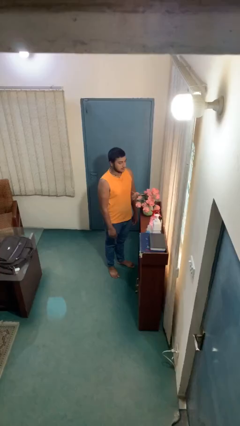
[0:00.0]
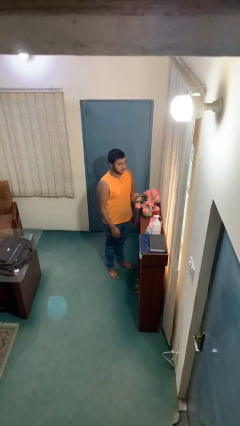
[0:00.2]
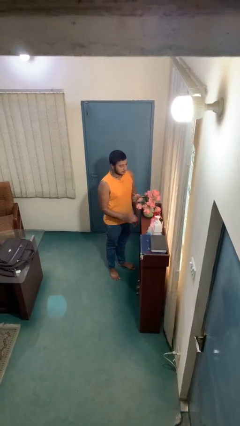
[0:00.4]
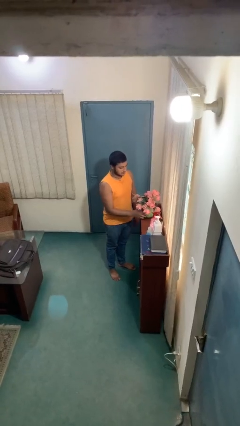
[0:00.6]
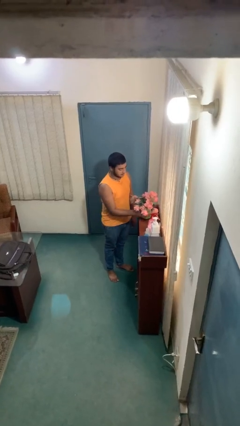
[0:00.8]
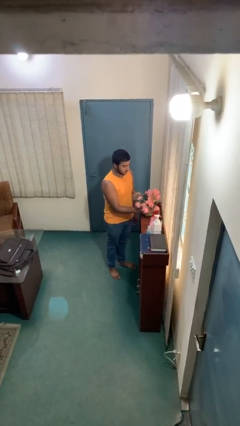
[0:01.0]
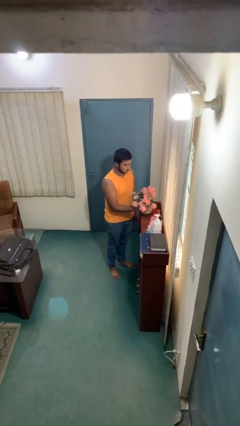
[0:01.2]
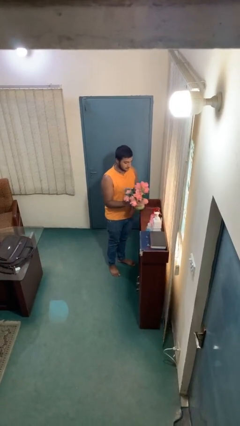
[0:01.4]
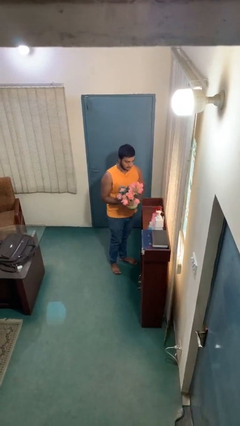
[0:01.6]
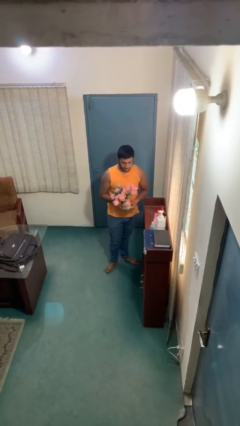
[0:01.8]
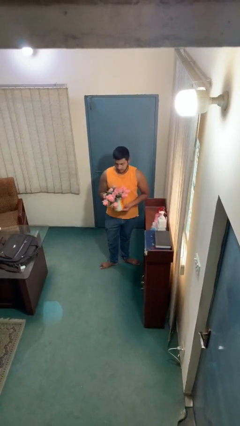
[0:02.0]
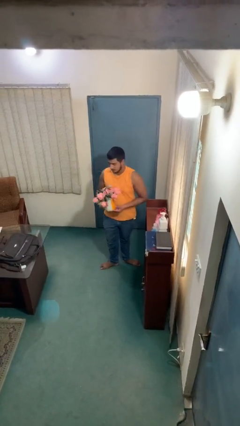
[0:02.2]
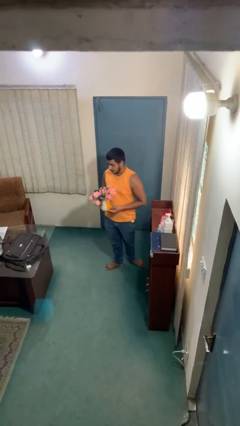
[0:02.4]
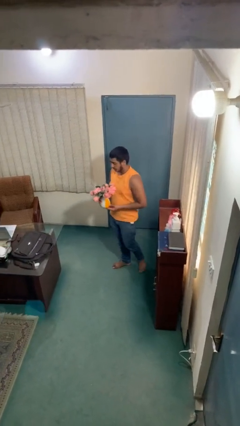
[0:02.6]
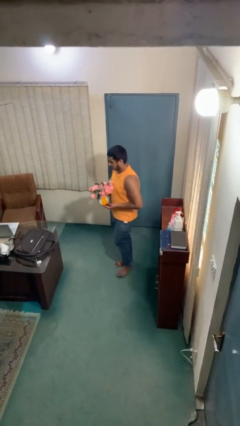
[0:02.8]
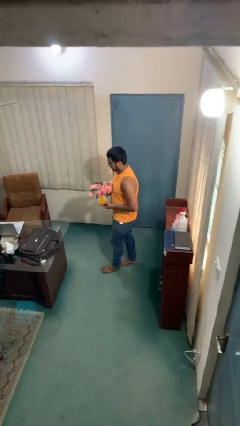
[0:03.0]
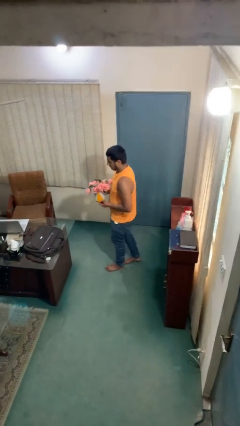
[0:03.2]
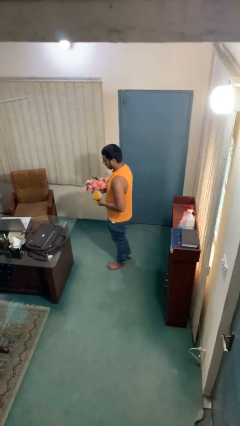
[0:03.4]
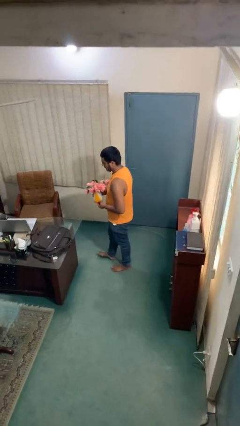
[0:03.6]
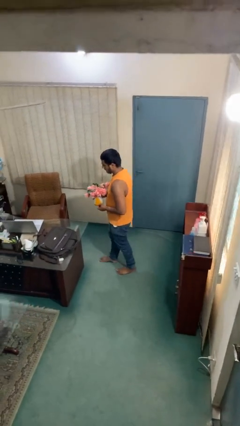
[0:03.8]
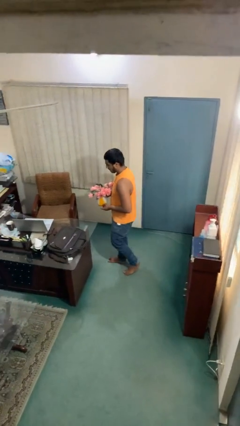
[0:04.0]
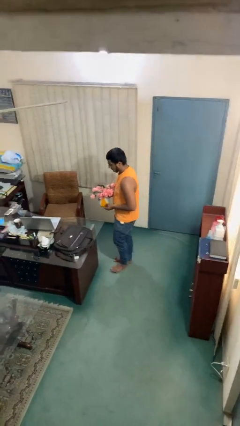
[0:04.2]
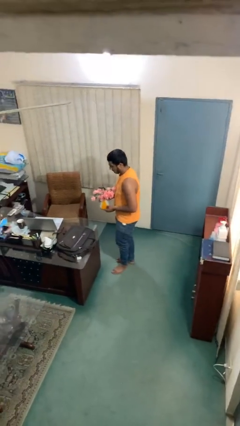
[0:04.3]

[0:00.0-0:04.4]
person picks up object from shelf

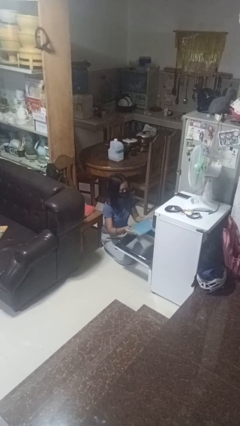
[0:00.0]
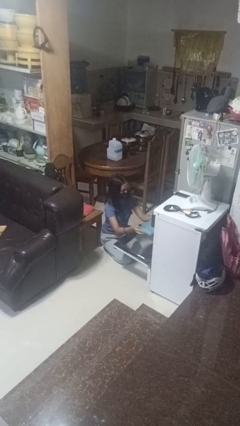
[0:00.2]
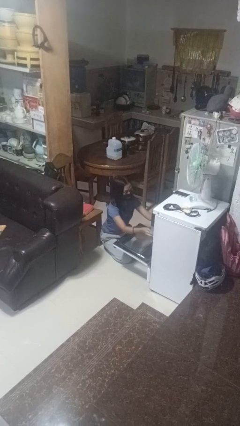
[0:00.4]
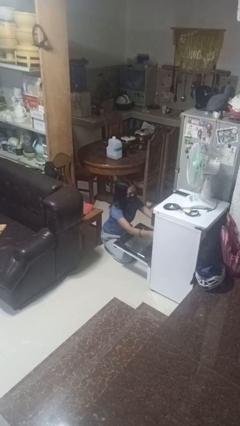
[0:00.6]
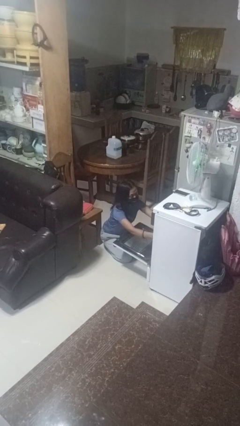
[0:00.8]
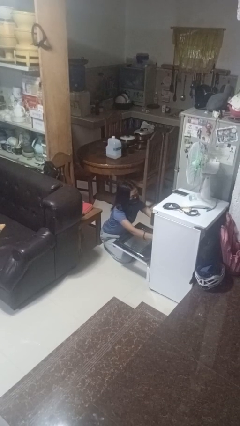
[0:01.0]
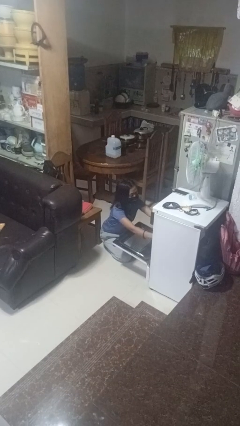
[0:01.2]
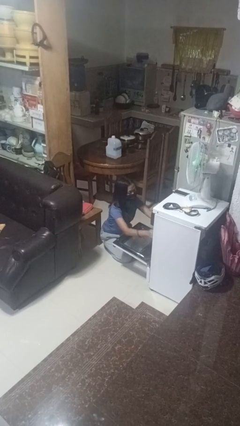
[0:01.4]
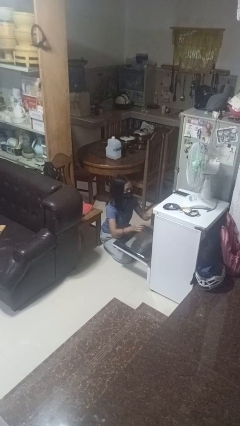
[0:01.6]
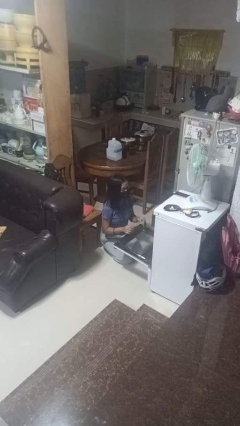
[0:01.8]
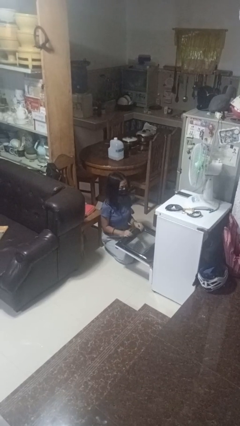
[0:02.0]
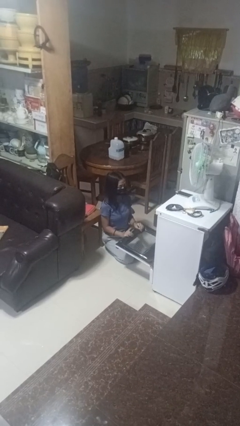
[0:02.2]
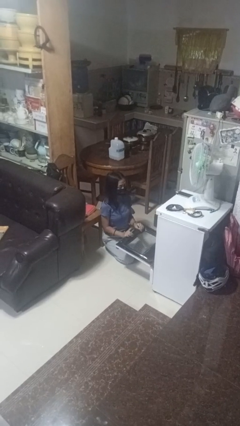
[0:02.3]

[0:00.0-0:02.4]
person puts object into oven

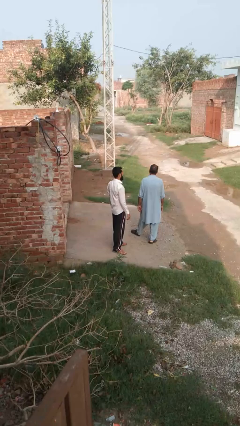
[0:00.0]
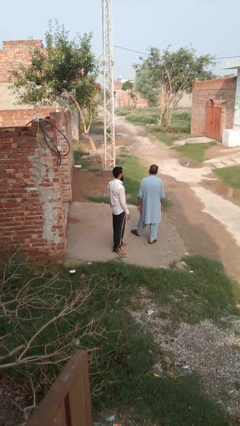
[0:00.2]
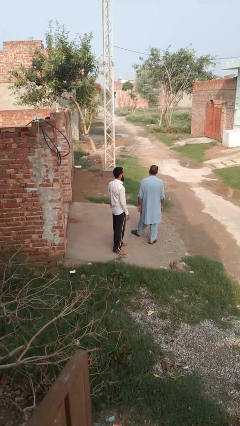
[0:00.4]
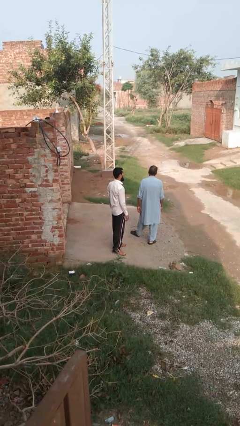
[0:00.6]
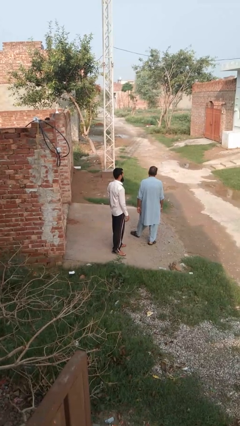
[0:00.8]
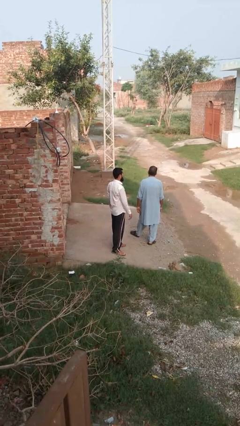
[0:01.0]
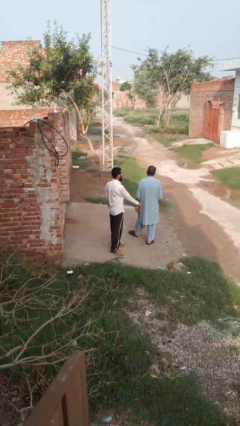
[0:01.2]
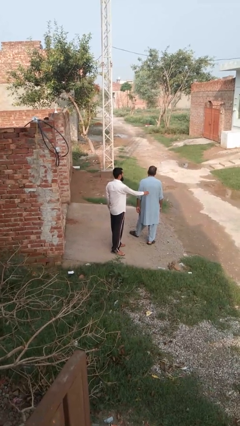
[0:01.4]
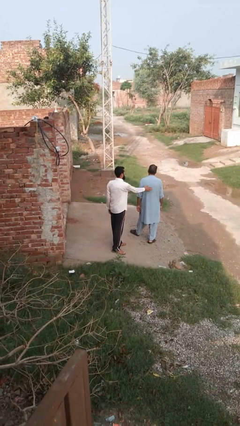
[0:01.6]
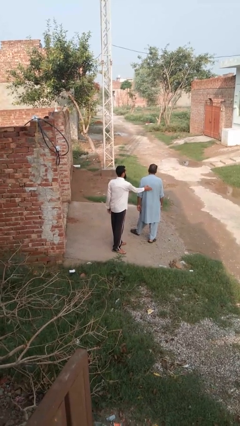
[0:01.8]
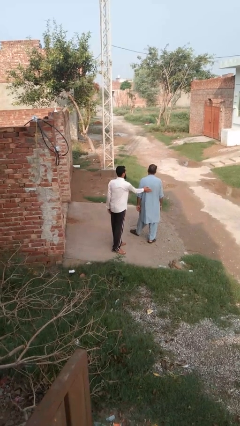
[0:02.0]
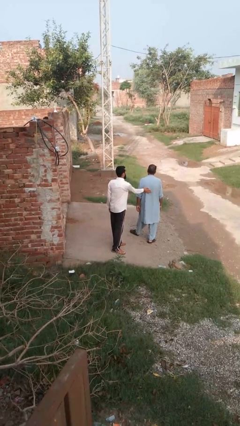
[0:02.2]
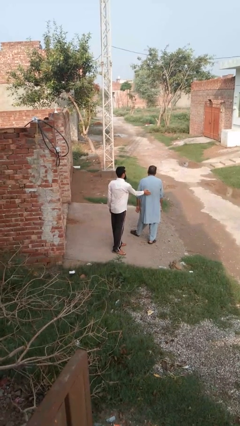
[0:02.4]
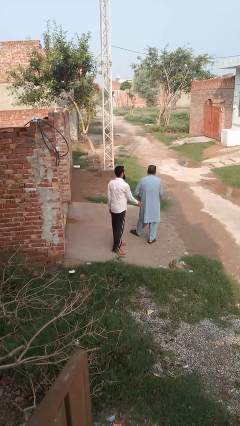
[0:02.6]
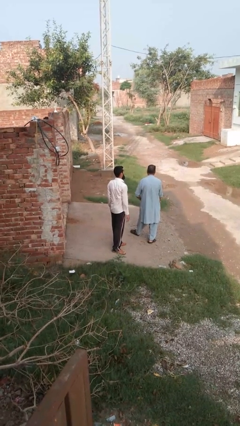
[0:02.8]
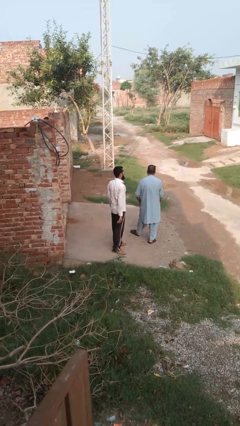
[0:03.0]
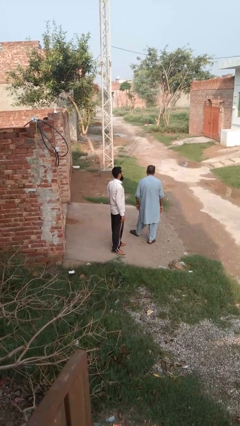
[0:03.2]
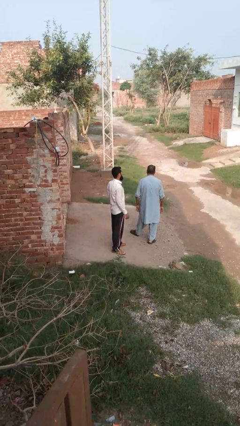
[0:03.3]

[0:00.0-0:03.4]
person touches back of person

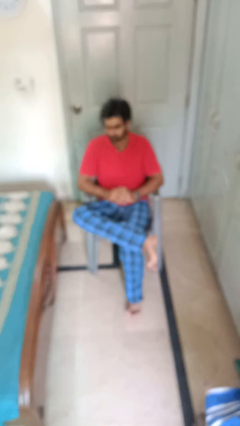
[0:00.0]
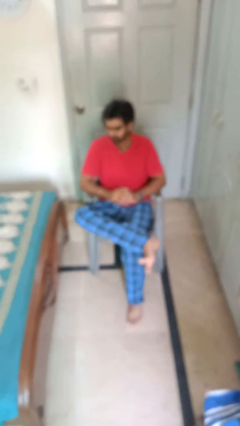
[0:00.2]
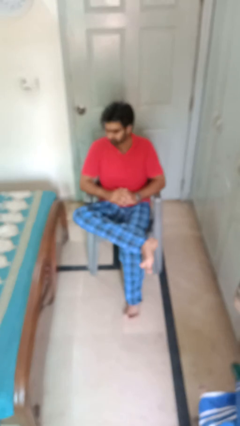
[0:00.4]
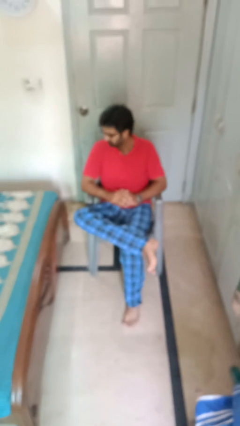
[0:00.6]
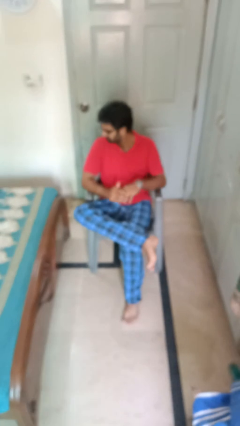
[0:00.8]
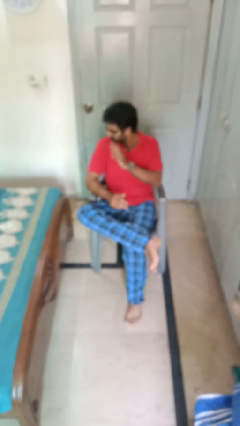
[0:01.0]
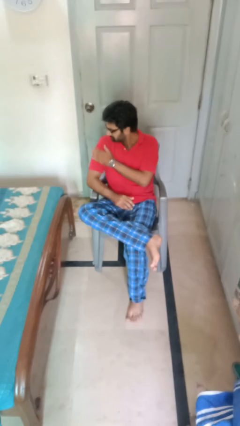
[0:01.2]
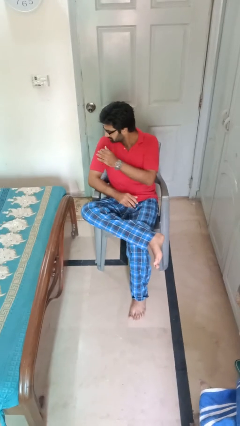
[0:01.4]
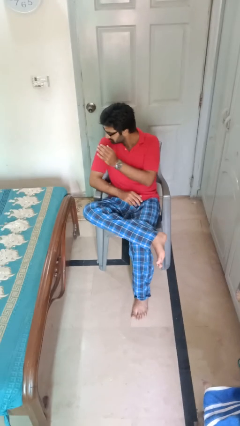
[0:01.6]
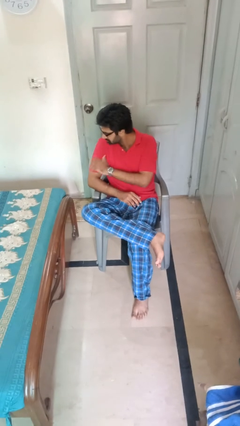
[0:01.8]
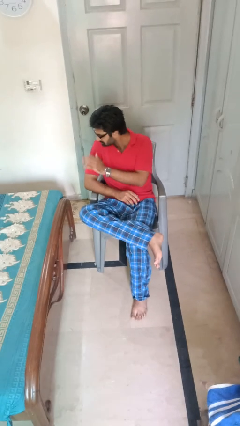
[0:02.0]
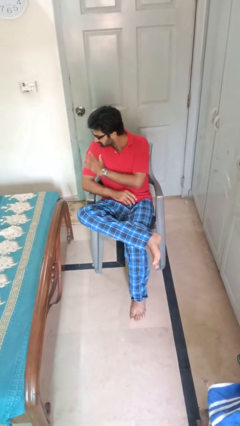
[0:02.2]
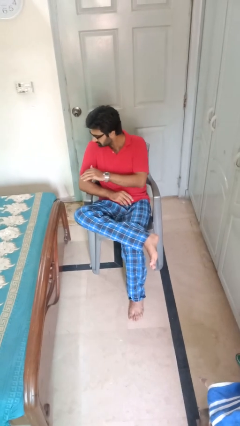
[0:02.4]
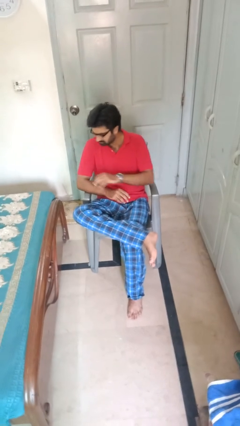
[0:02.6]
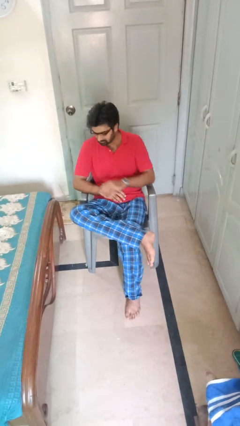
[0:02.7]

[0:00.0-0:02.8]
person swats bug

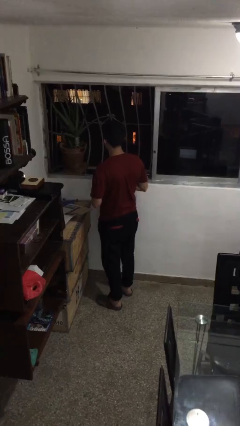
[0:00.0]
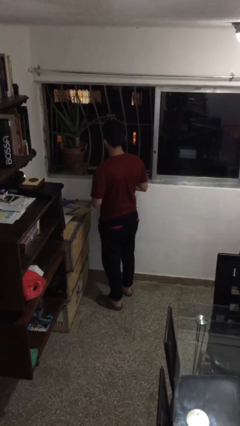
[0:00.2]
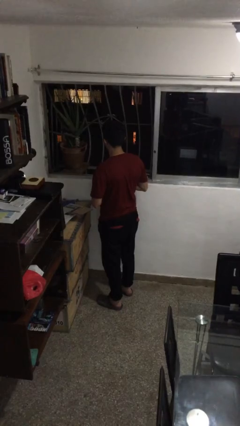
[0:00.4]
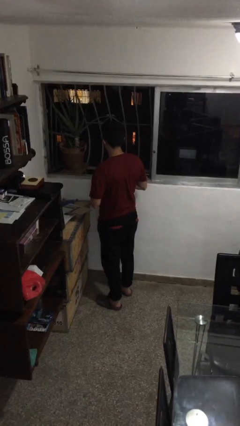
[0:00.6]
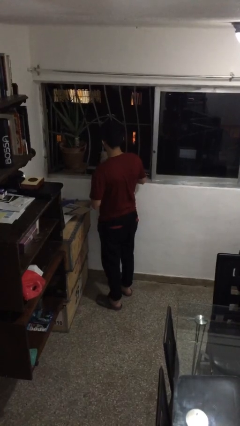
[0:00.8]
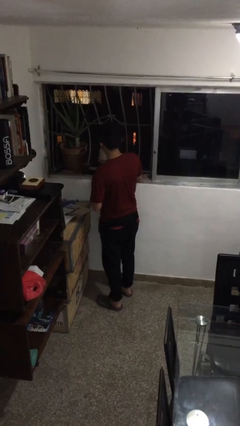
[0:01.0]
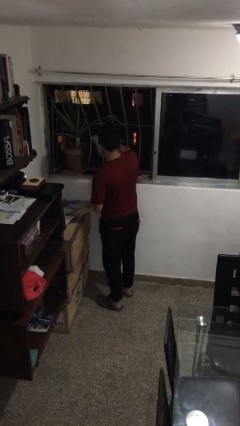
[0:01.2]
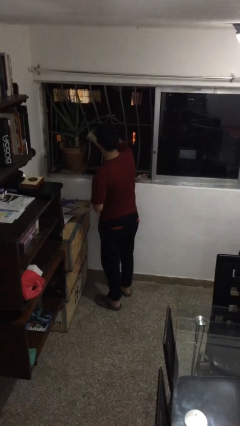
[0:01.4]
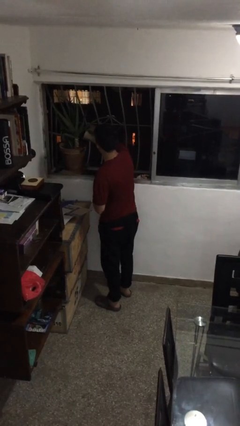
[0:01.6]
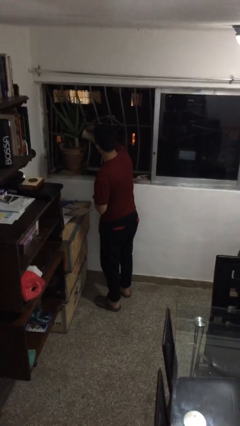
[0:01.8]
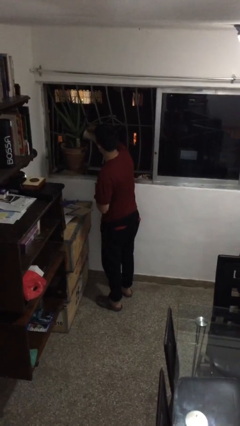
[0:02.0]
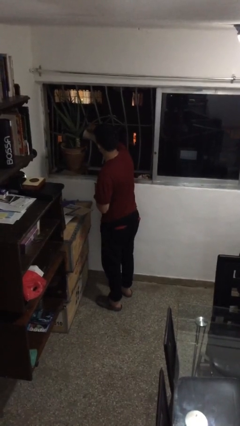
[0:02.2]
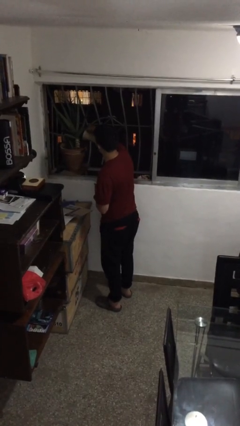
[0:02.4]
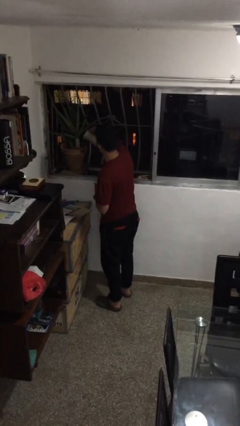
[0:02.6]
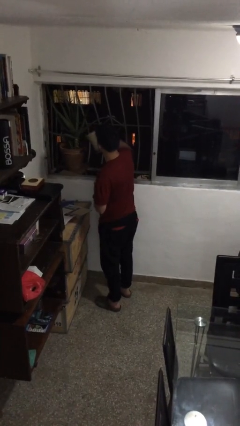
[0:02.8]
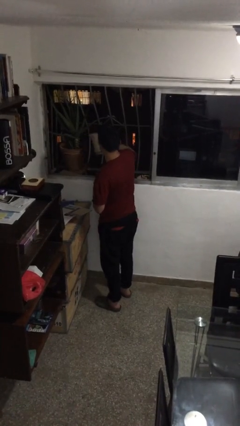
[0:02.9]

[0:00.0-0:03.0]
person waters houseplant

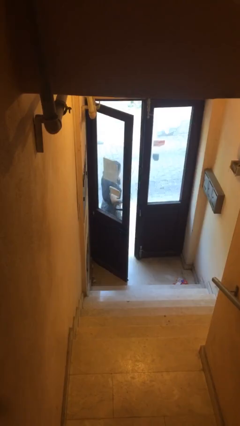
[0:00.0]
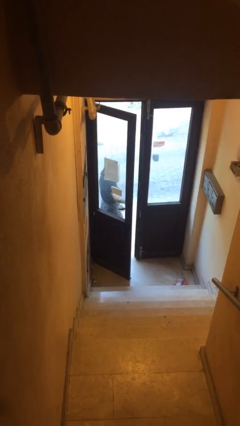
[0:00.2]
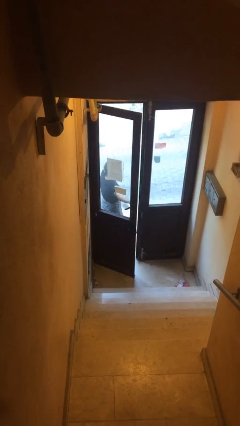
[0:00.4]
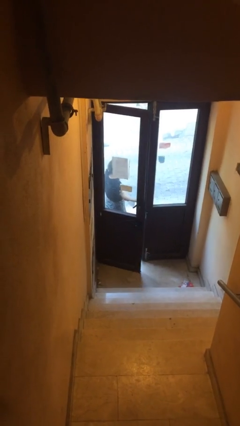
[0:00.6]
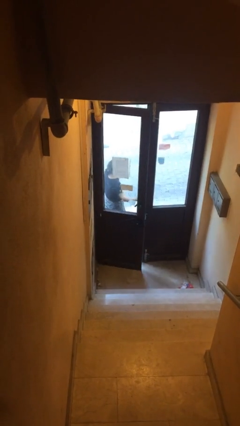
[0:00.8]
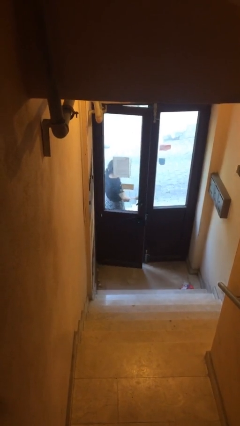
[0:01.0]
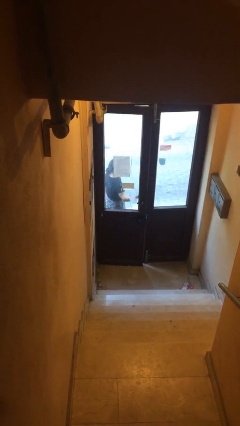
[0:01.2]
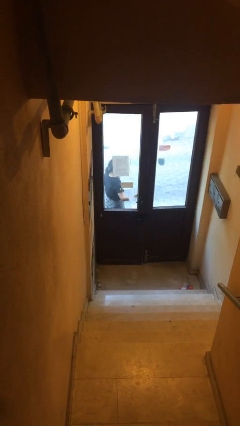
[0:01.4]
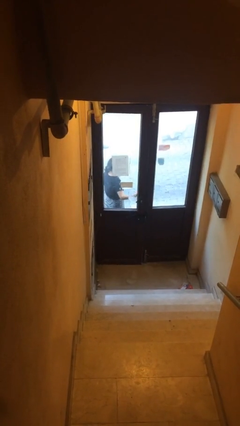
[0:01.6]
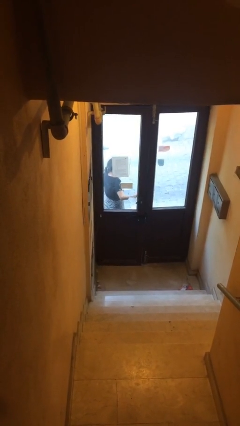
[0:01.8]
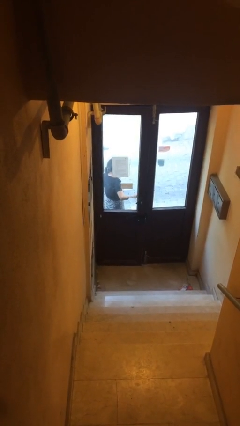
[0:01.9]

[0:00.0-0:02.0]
person closes facility door
